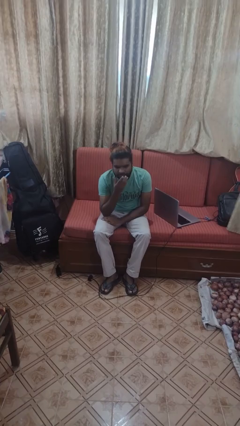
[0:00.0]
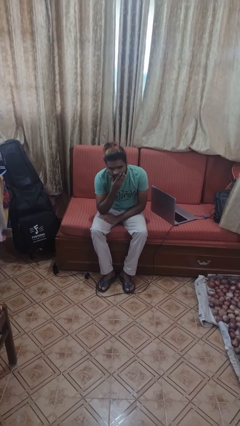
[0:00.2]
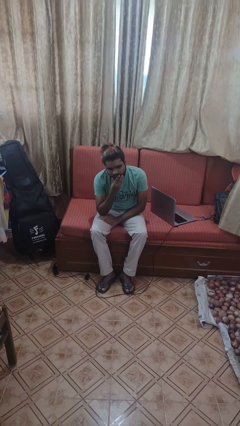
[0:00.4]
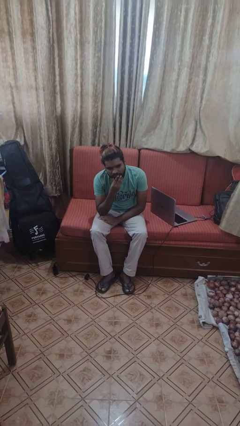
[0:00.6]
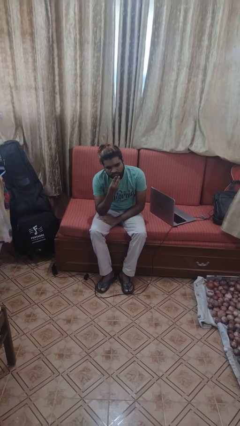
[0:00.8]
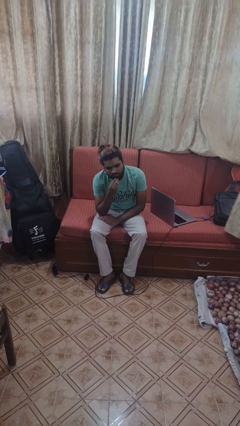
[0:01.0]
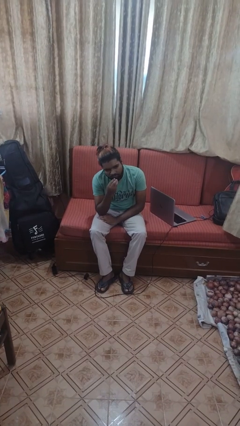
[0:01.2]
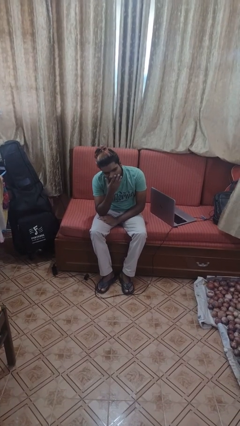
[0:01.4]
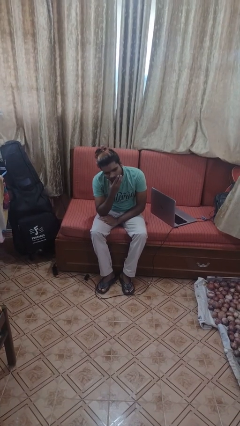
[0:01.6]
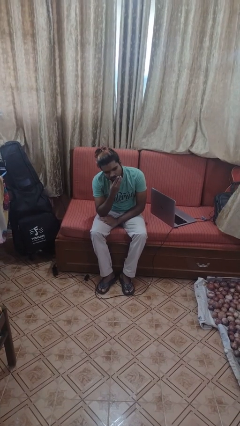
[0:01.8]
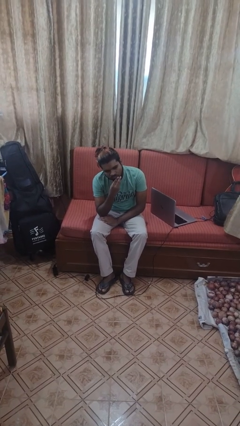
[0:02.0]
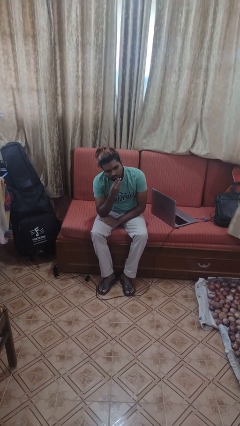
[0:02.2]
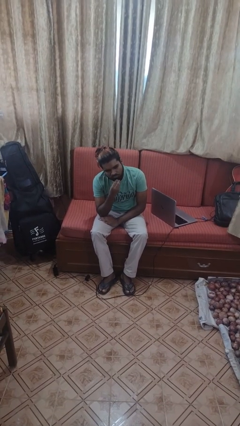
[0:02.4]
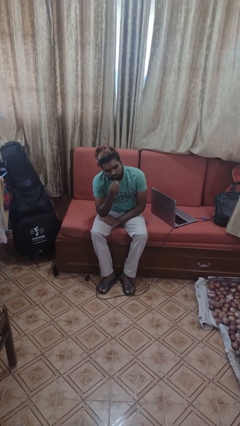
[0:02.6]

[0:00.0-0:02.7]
person strokes chin

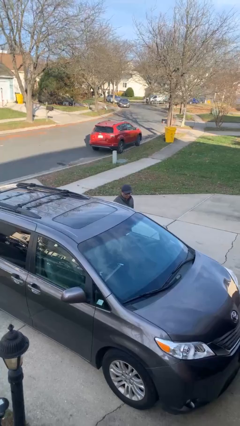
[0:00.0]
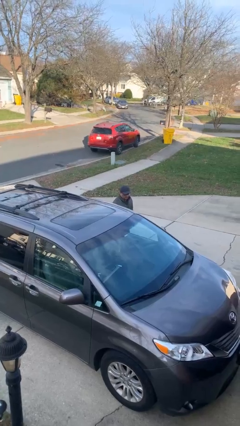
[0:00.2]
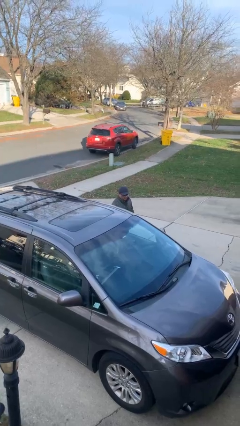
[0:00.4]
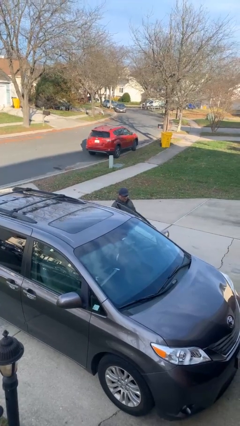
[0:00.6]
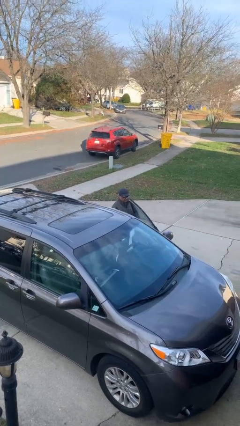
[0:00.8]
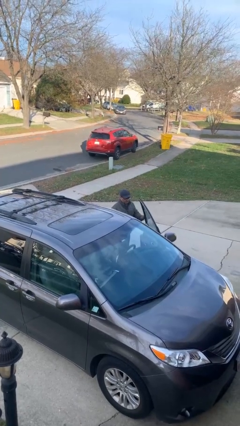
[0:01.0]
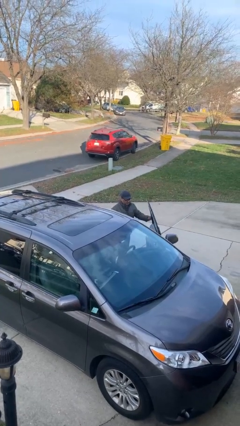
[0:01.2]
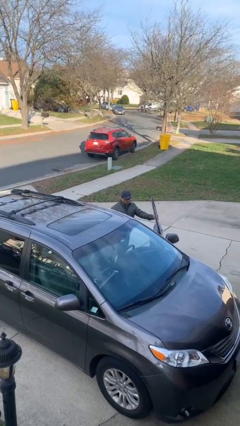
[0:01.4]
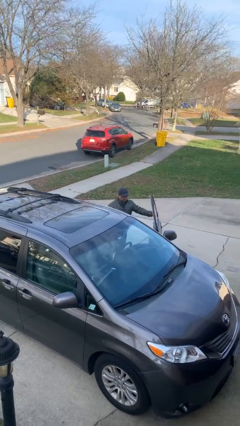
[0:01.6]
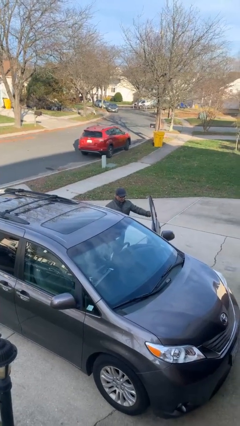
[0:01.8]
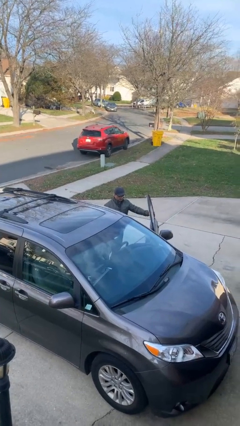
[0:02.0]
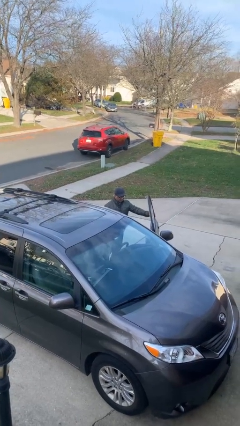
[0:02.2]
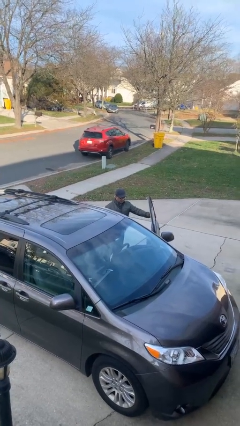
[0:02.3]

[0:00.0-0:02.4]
person opens car door

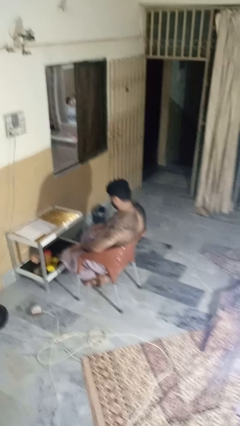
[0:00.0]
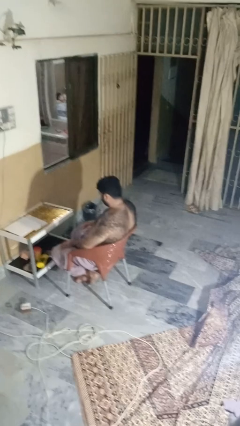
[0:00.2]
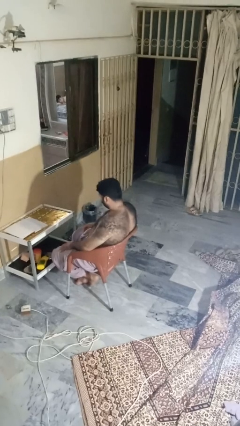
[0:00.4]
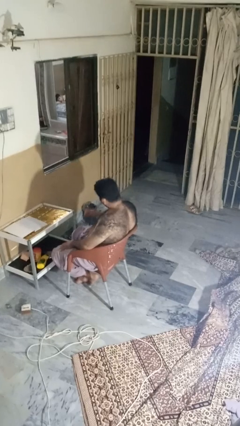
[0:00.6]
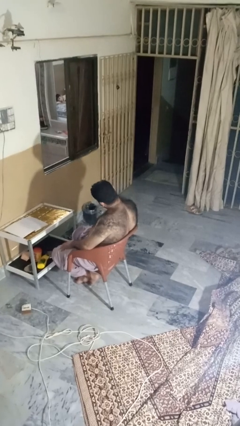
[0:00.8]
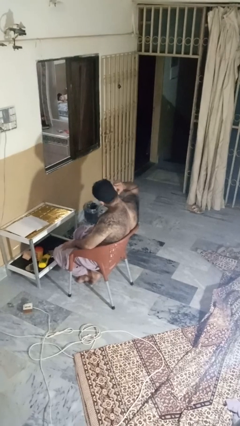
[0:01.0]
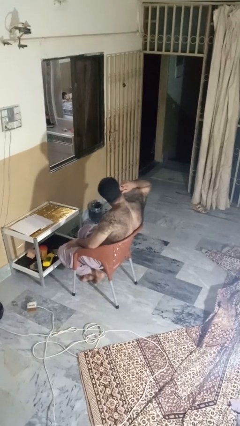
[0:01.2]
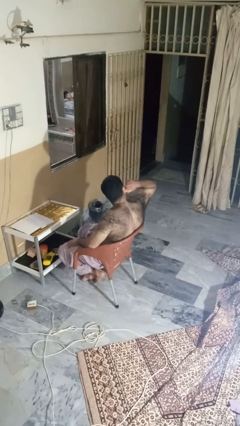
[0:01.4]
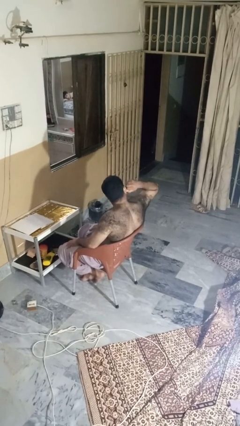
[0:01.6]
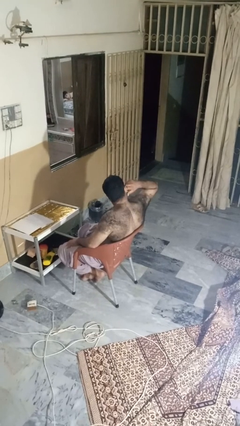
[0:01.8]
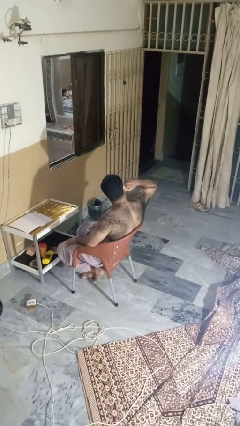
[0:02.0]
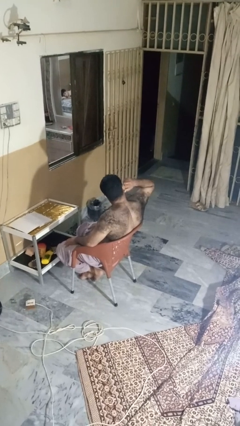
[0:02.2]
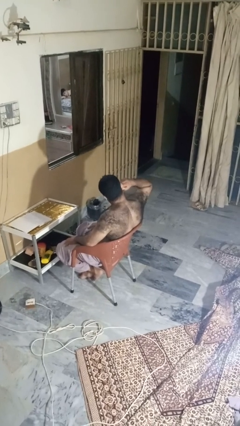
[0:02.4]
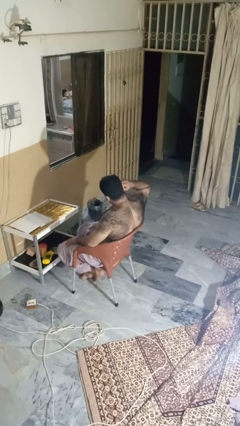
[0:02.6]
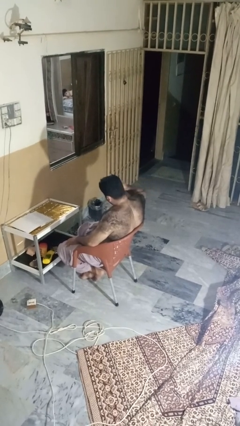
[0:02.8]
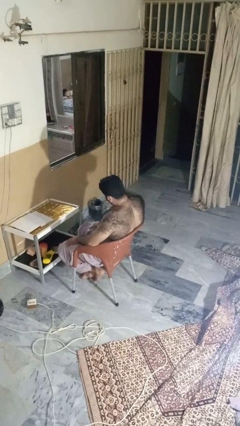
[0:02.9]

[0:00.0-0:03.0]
person touches earlobe

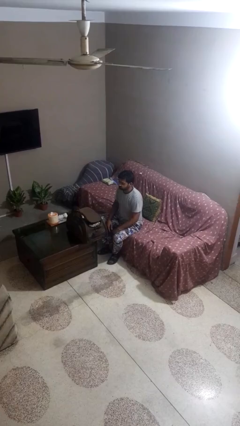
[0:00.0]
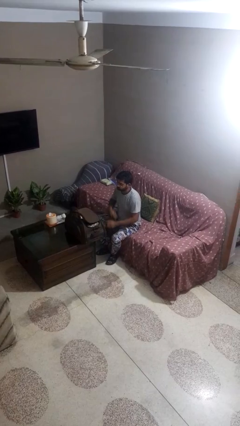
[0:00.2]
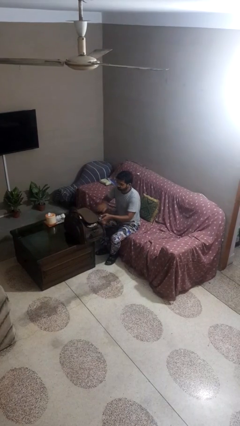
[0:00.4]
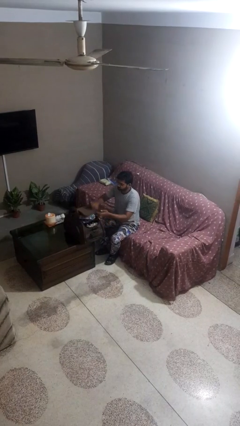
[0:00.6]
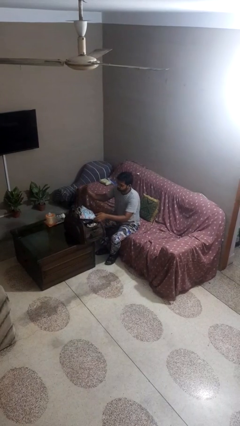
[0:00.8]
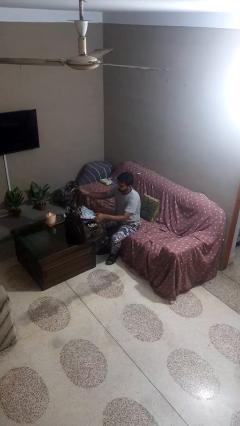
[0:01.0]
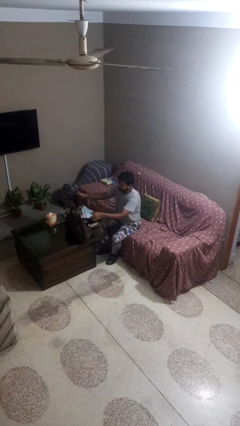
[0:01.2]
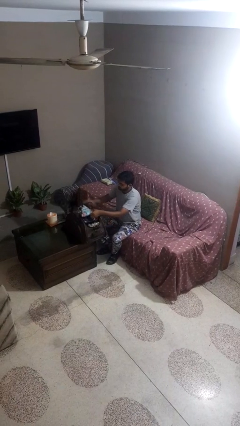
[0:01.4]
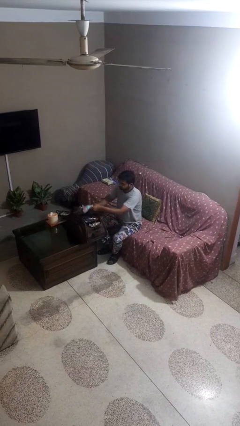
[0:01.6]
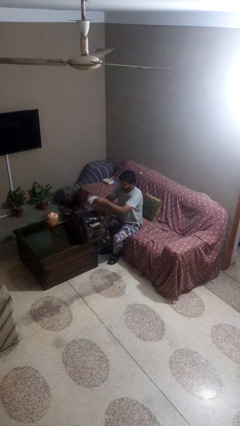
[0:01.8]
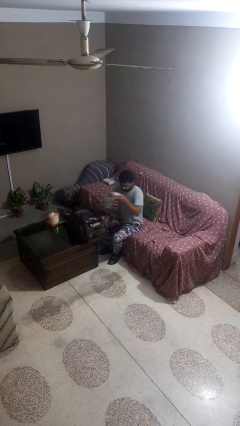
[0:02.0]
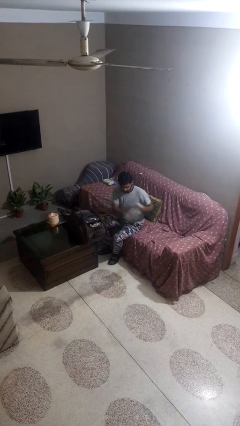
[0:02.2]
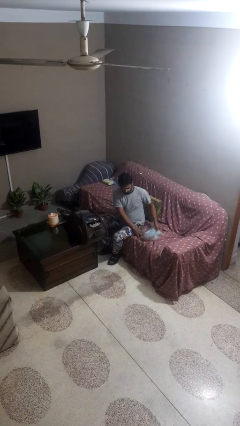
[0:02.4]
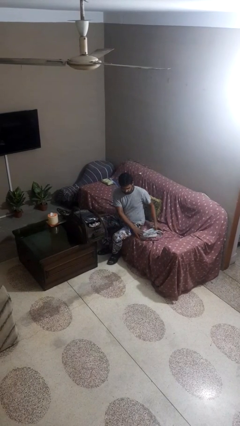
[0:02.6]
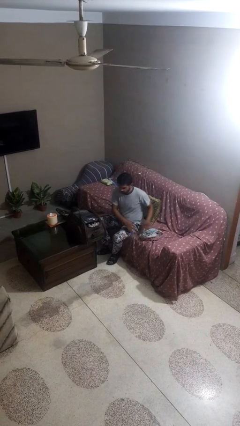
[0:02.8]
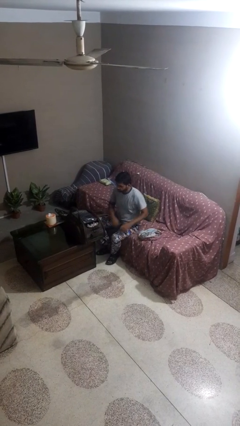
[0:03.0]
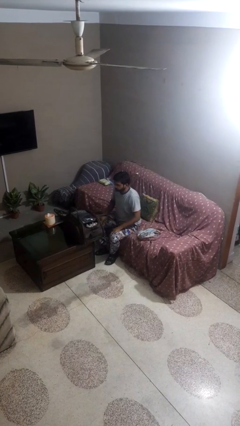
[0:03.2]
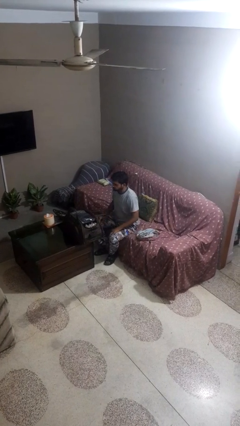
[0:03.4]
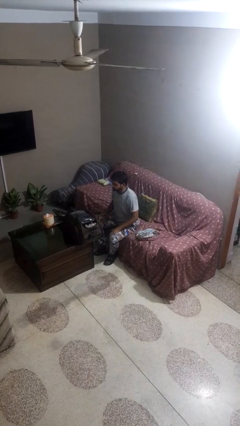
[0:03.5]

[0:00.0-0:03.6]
person unloads clothes from suitcase

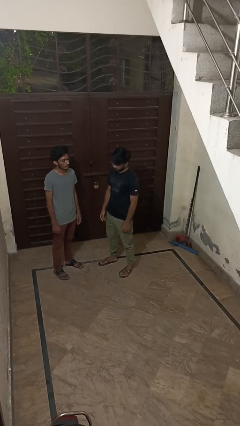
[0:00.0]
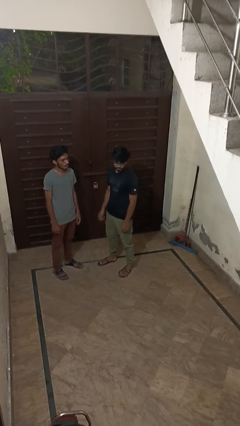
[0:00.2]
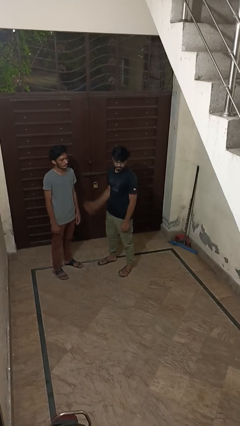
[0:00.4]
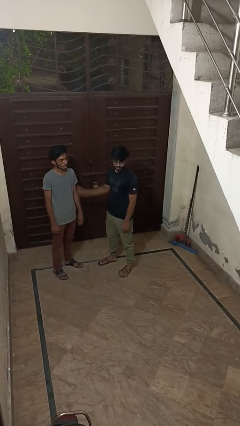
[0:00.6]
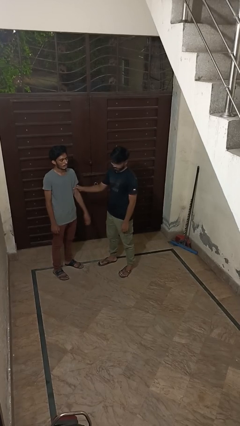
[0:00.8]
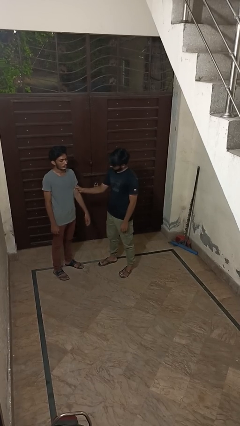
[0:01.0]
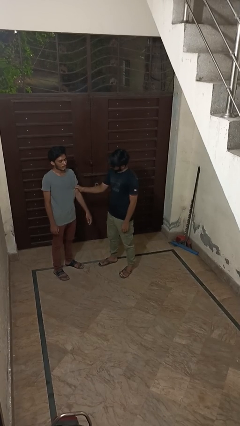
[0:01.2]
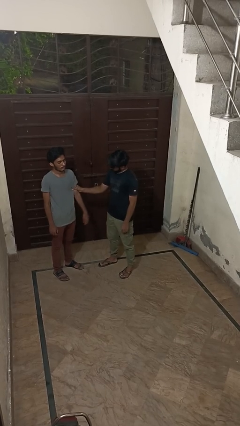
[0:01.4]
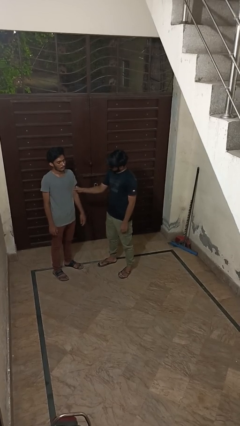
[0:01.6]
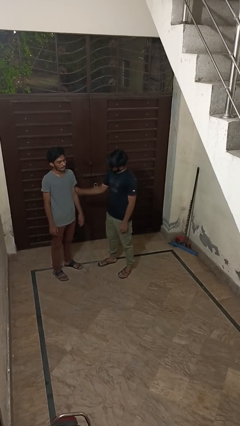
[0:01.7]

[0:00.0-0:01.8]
person grabs person by bicep

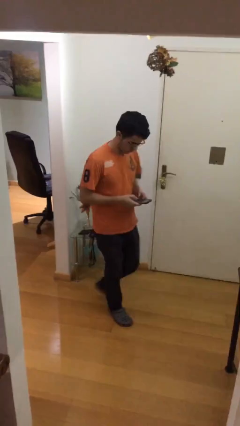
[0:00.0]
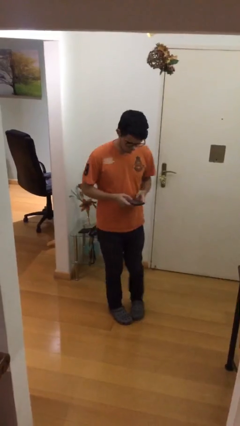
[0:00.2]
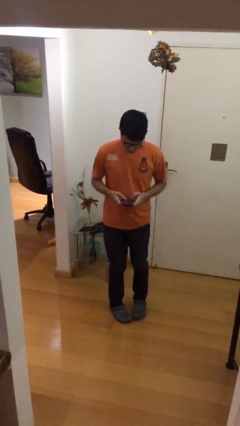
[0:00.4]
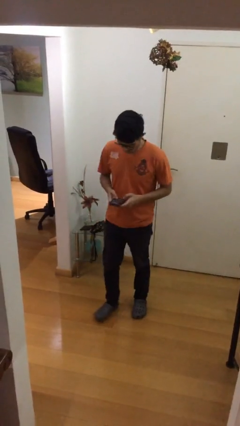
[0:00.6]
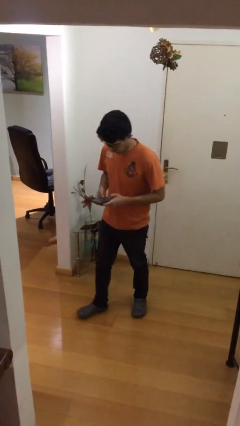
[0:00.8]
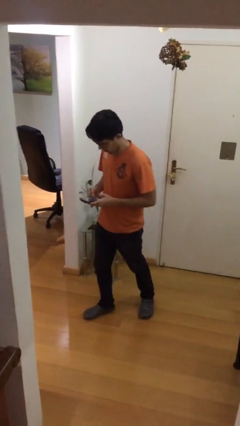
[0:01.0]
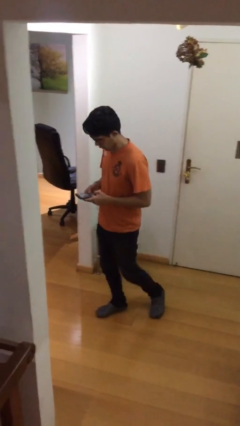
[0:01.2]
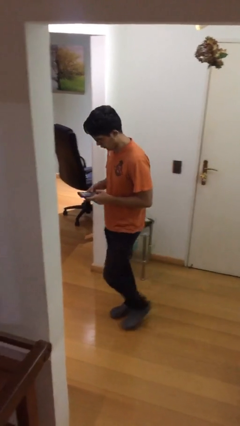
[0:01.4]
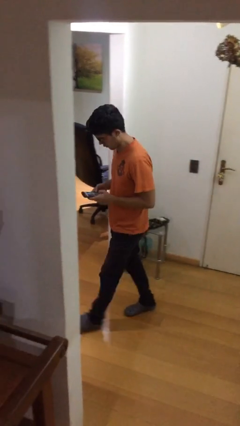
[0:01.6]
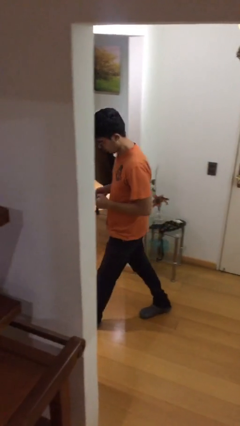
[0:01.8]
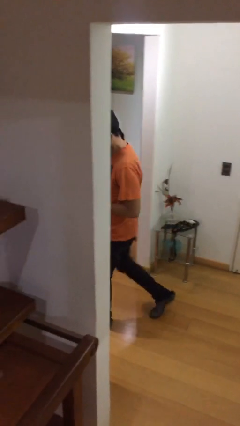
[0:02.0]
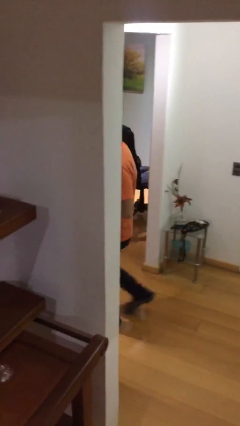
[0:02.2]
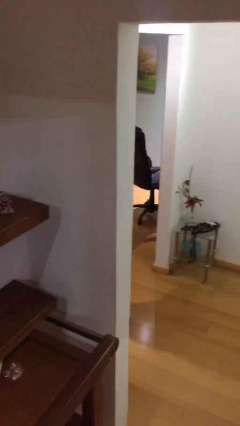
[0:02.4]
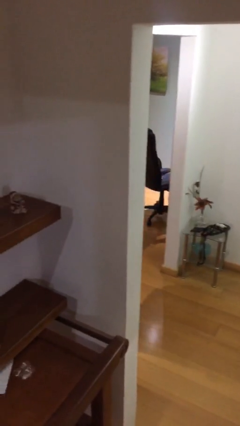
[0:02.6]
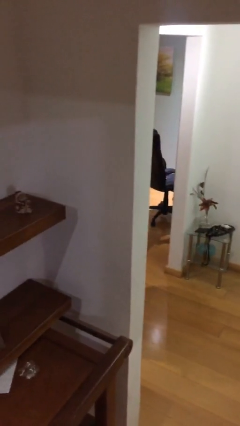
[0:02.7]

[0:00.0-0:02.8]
person exits scene through structure

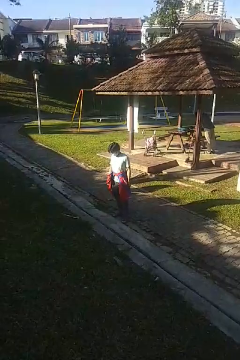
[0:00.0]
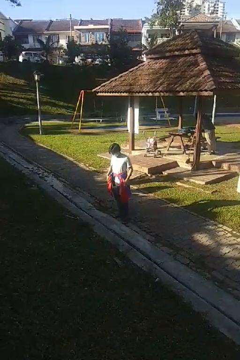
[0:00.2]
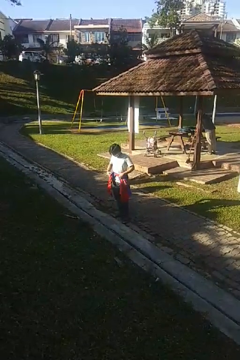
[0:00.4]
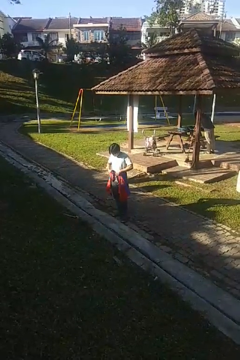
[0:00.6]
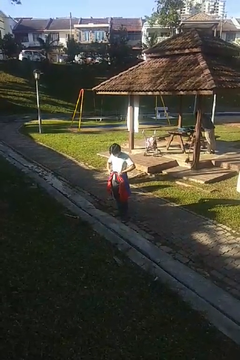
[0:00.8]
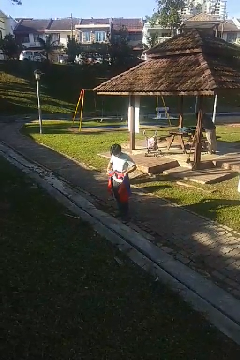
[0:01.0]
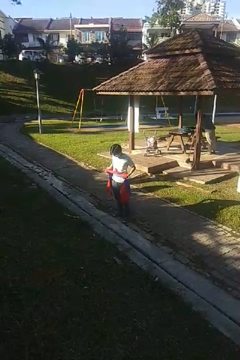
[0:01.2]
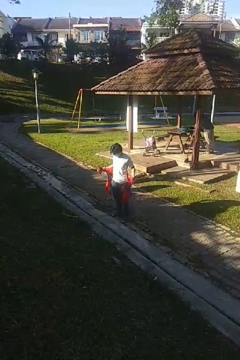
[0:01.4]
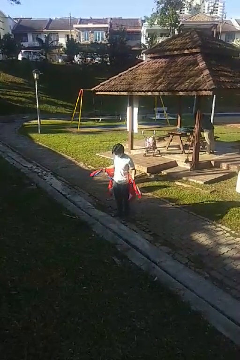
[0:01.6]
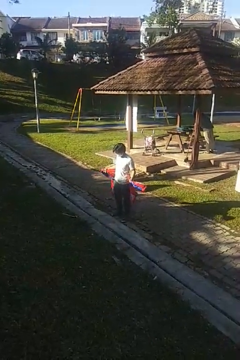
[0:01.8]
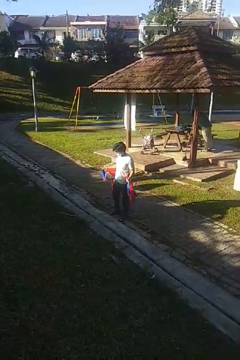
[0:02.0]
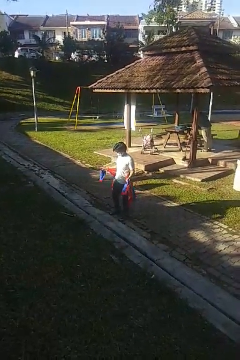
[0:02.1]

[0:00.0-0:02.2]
person unties jacket around waist
